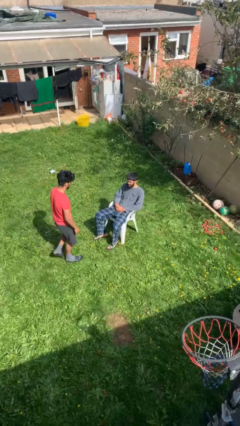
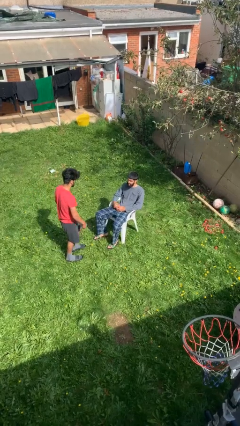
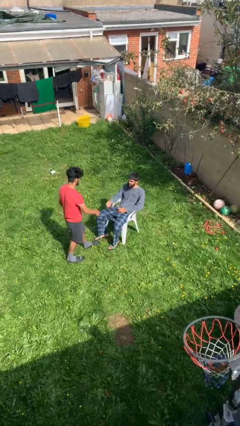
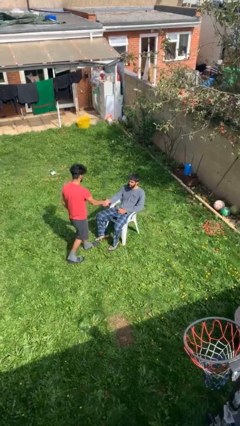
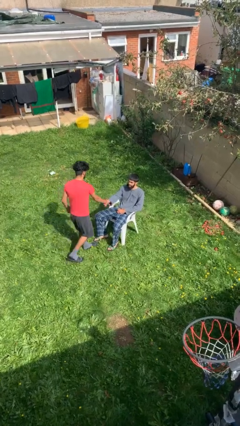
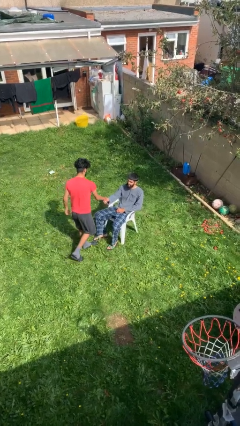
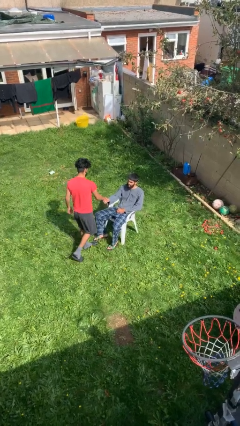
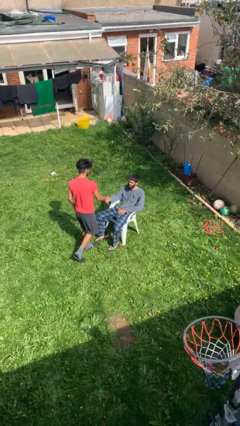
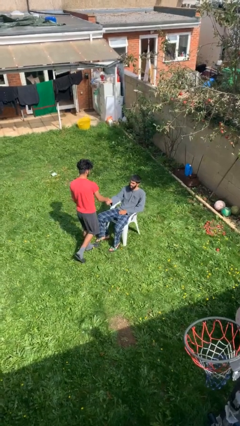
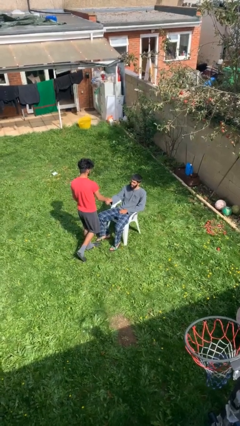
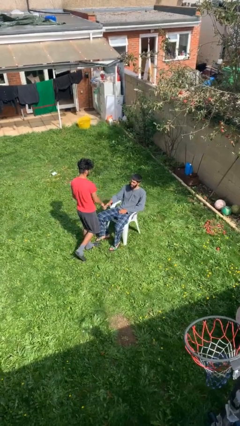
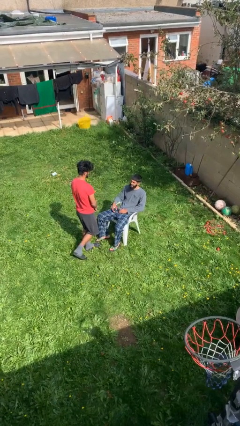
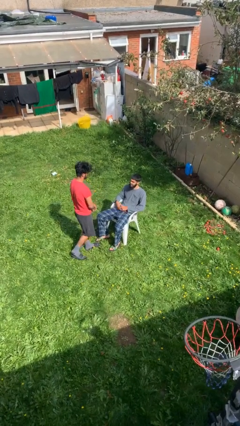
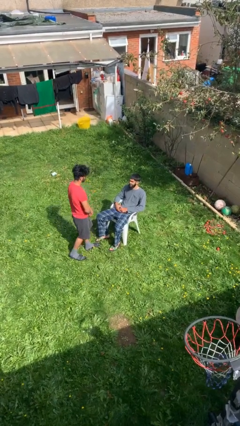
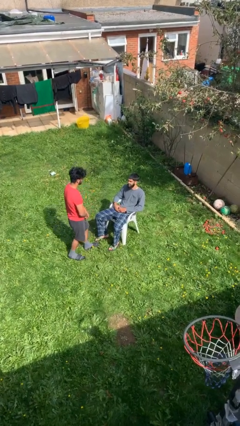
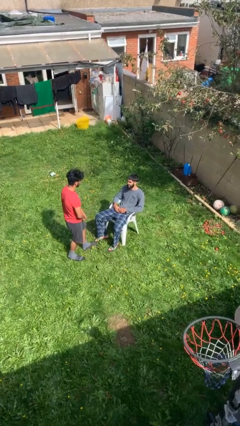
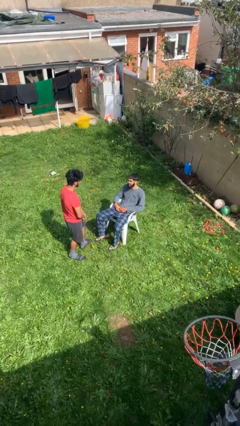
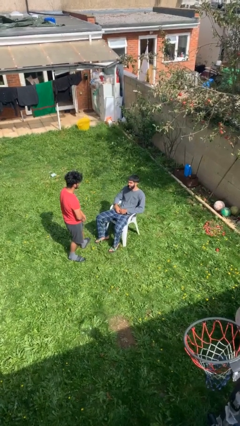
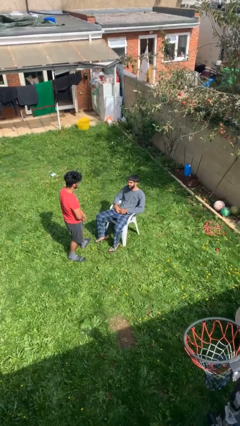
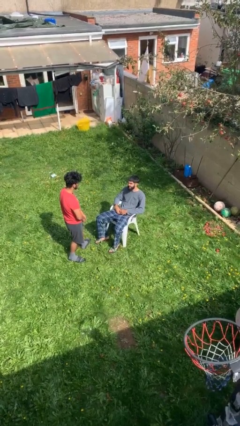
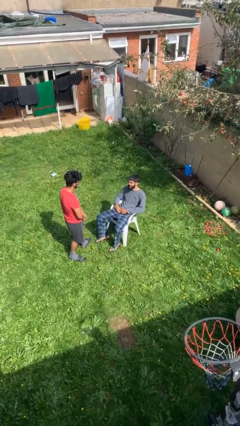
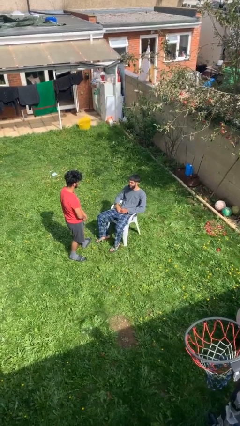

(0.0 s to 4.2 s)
person shakes hand

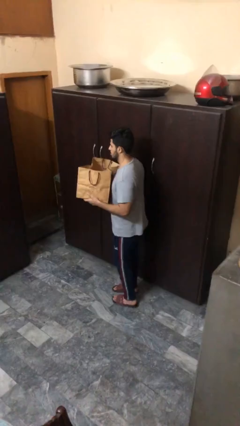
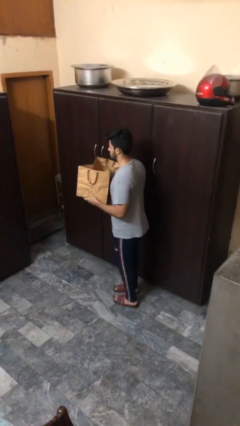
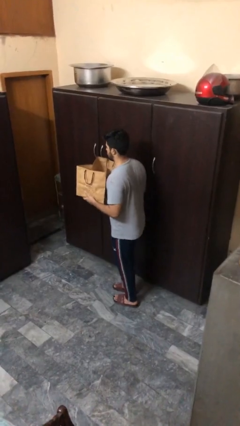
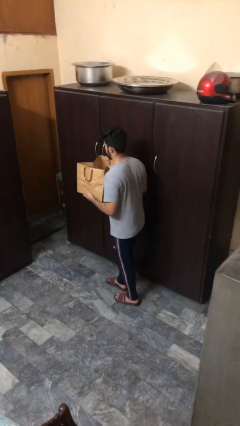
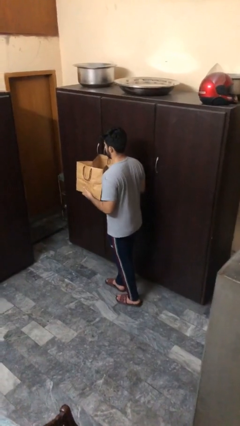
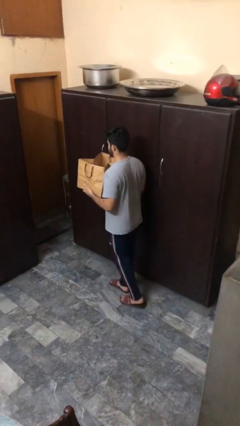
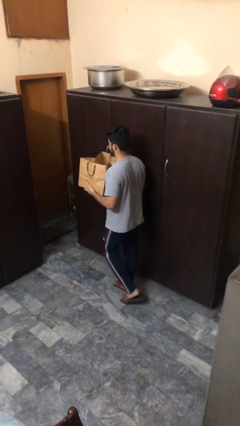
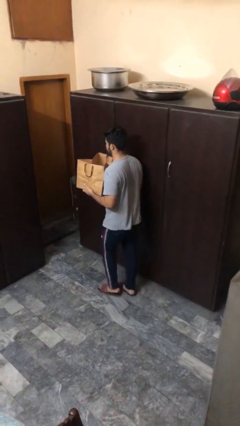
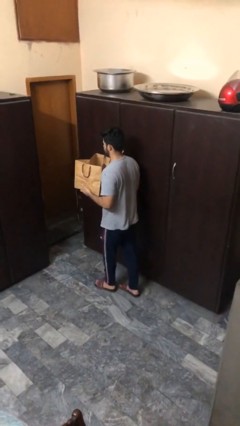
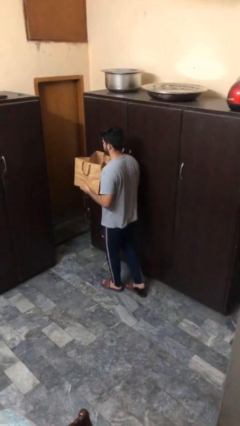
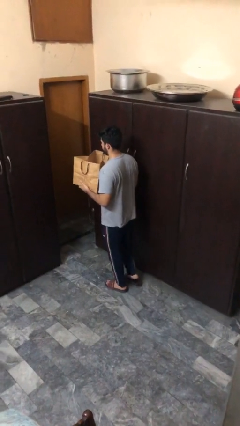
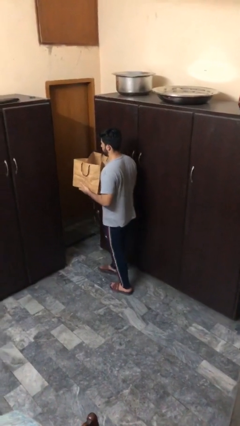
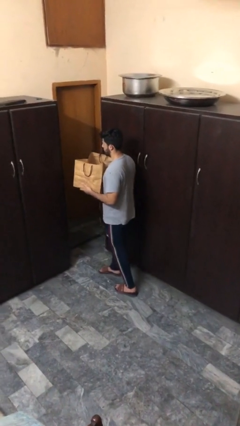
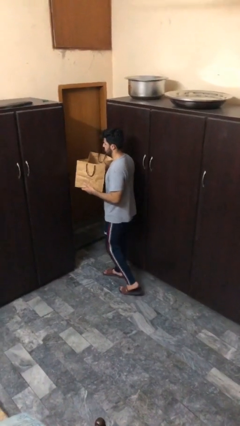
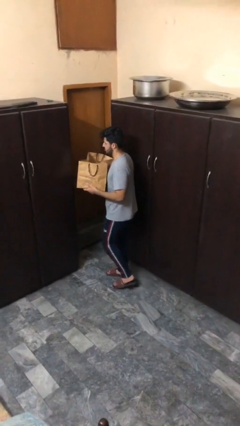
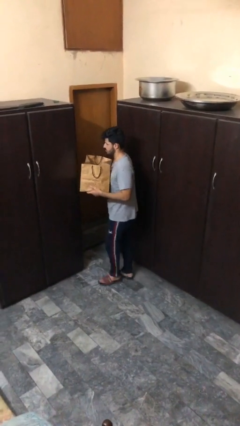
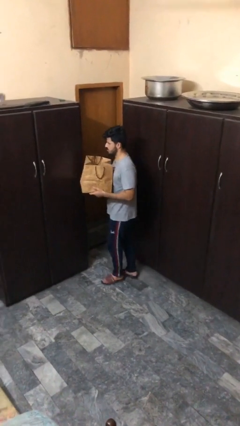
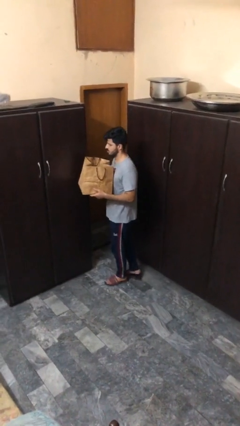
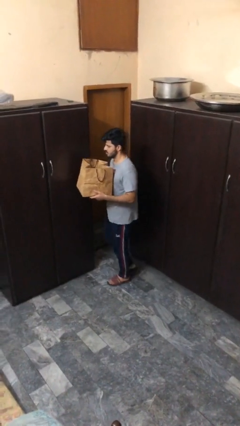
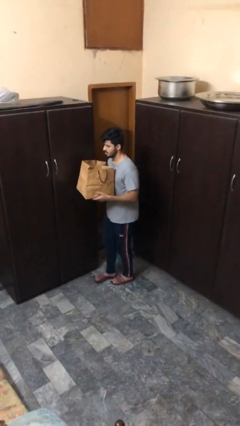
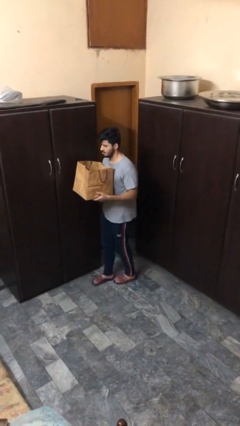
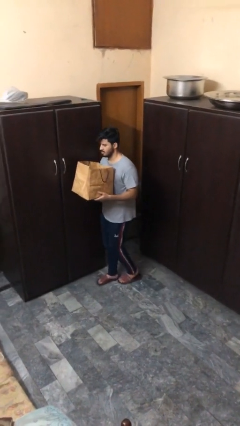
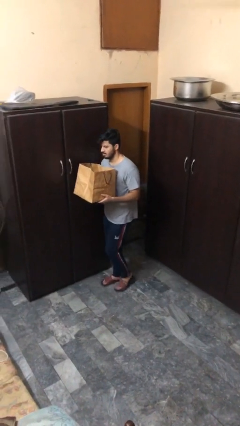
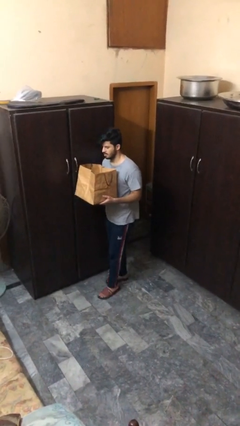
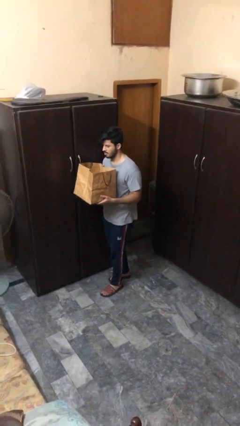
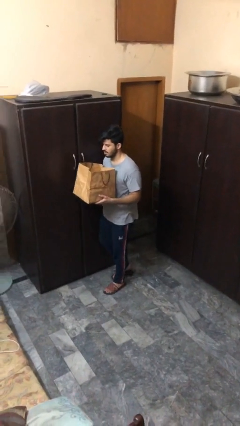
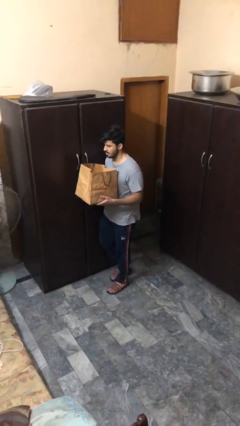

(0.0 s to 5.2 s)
person carries groceries

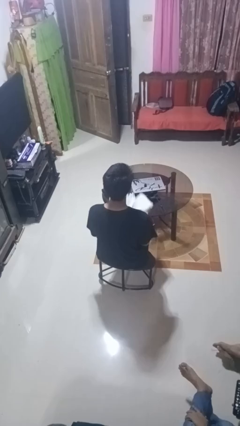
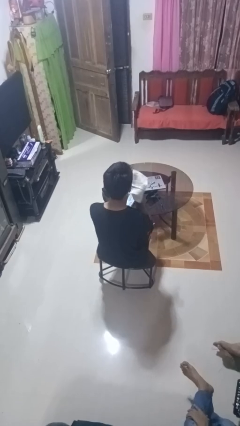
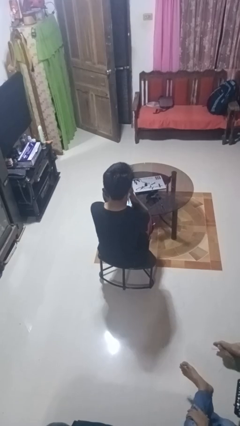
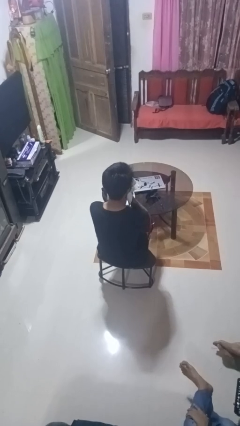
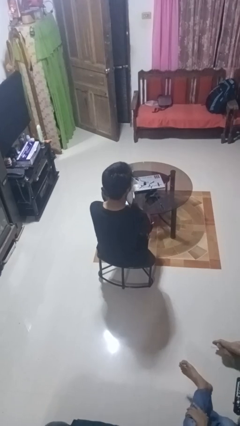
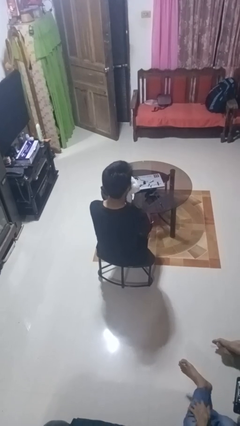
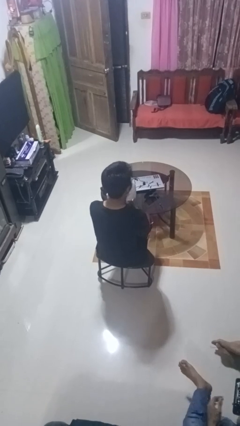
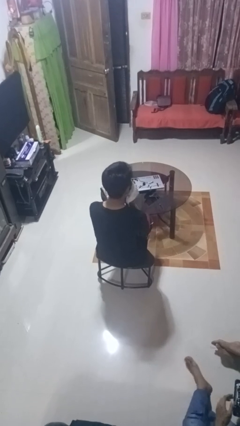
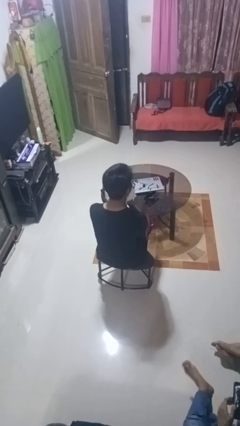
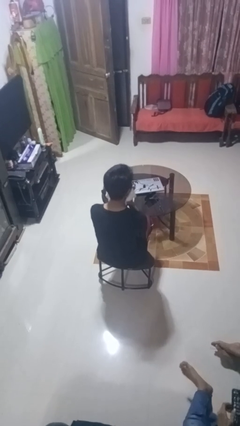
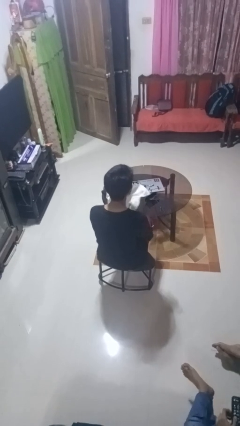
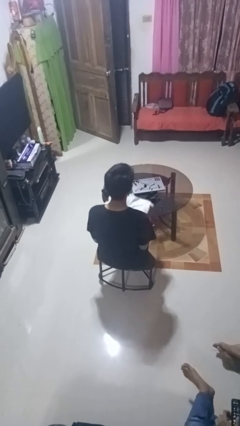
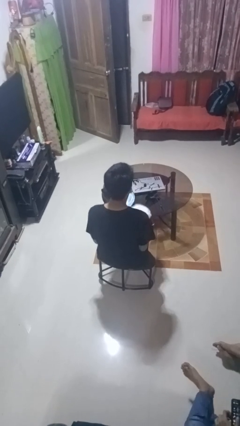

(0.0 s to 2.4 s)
person wipes mouth with napkin

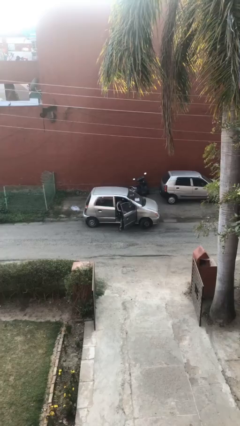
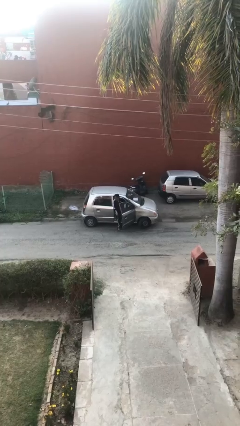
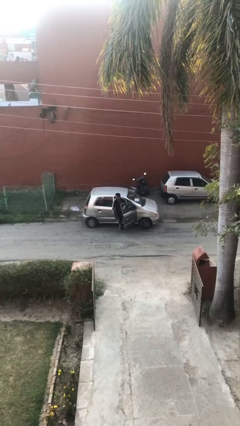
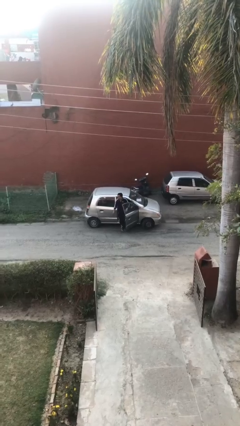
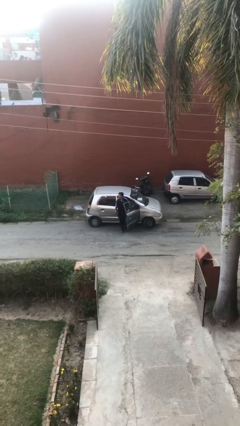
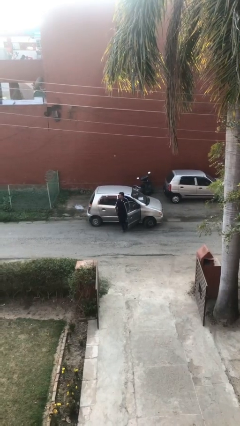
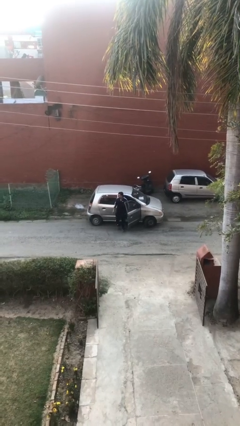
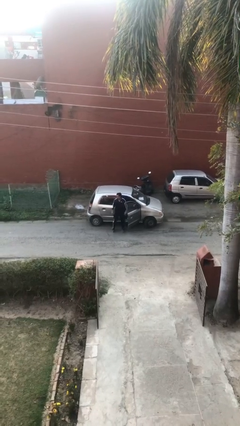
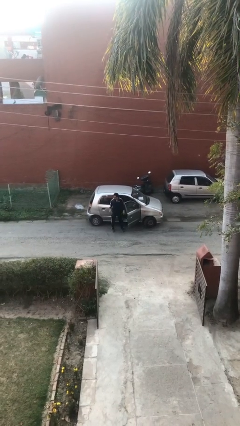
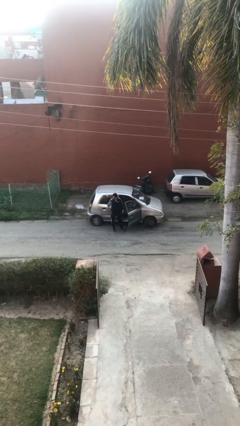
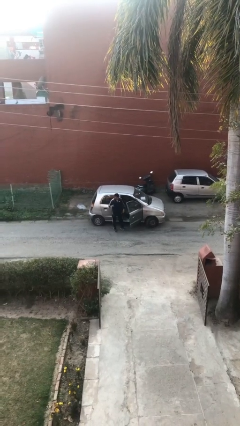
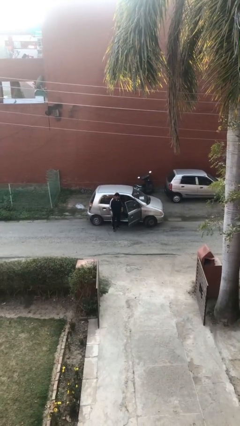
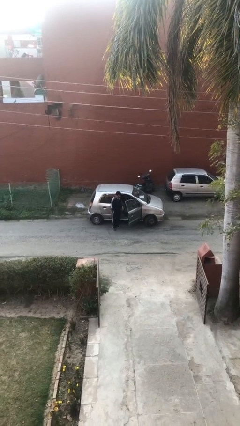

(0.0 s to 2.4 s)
person exits car

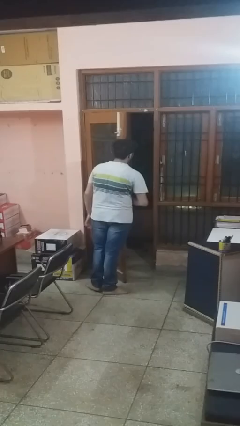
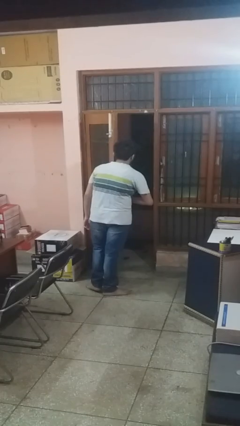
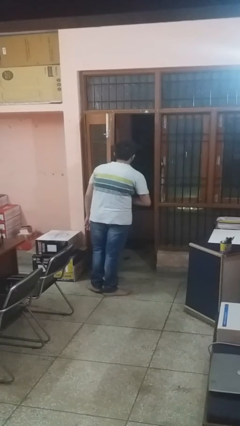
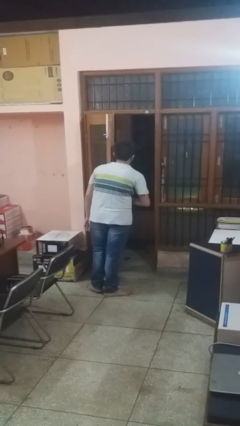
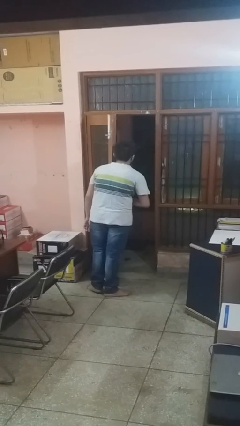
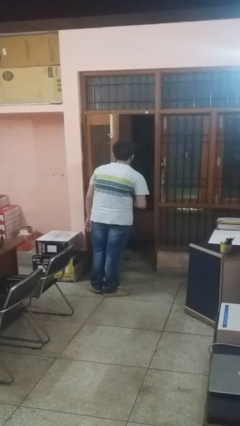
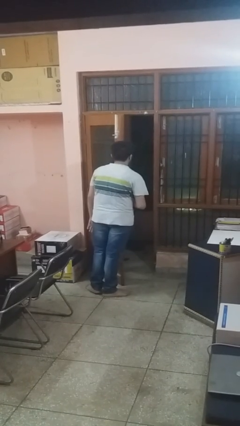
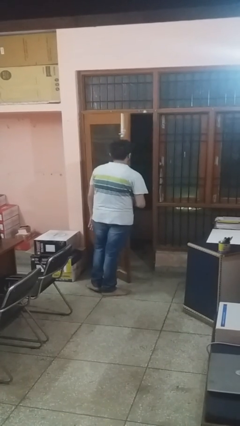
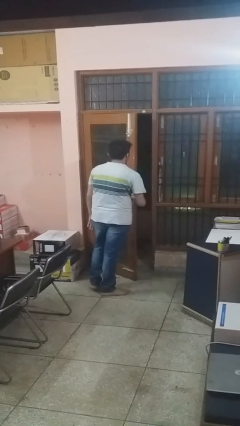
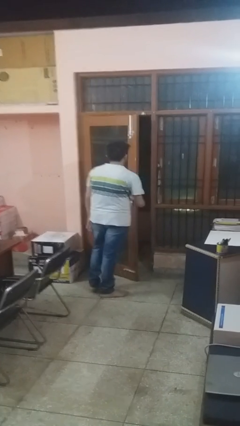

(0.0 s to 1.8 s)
person opens facility door

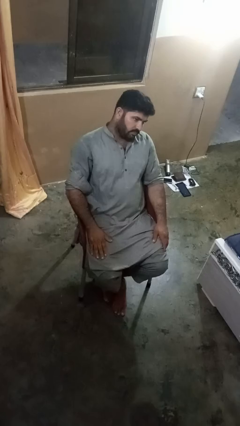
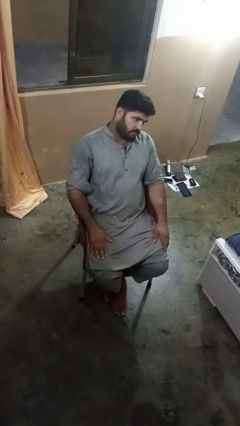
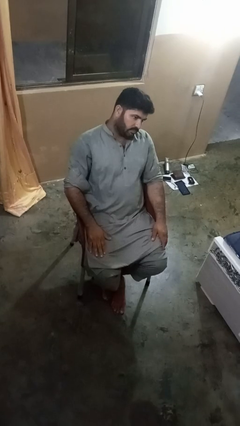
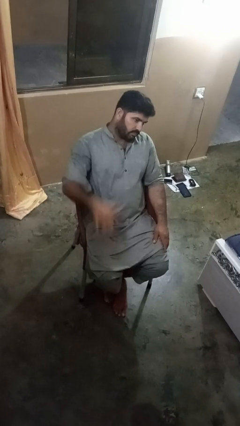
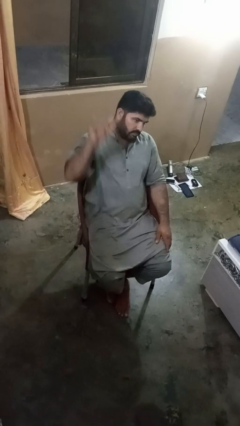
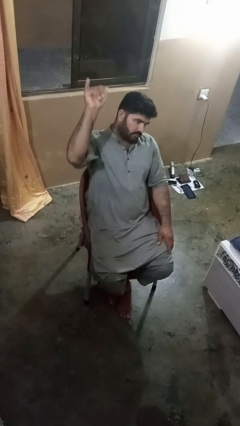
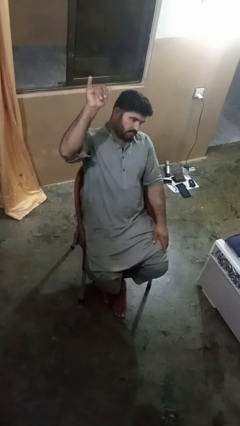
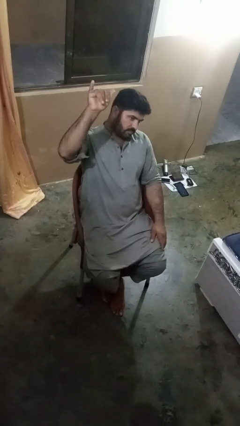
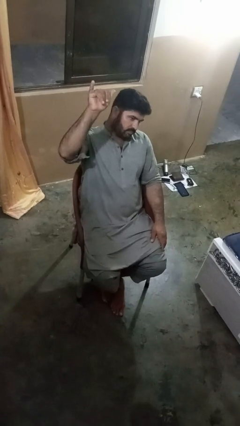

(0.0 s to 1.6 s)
person gestures hang loose
